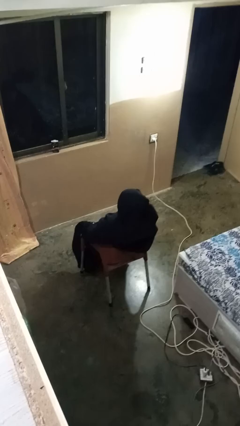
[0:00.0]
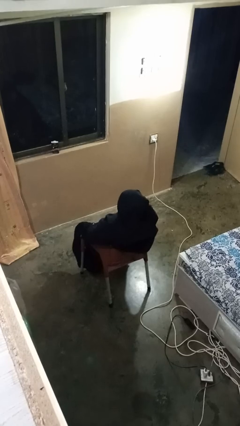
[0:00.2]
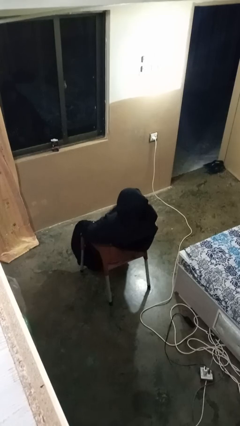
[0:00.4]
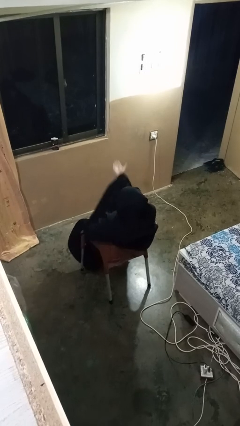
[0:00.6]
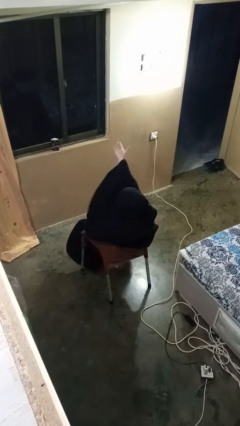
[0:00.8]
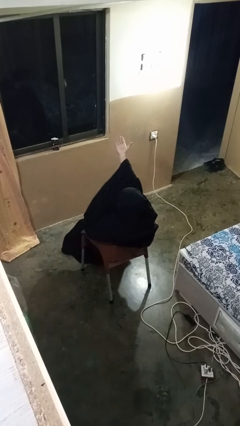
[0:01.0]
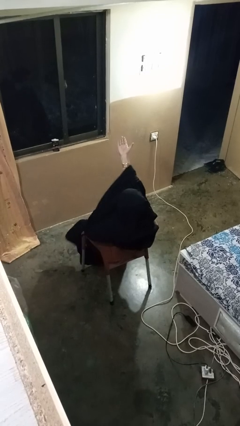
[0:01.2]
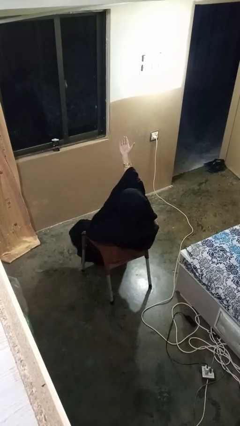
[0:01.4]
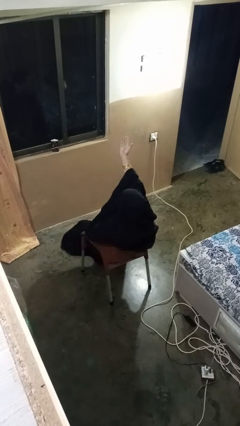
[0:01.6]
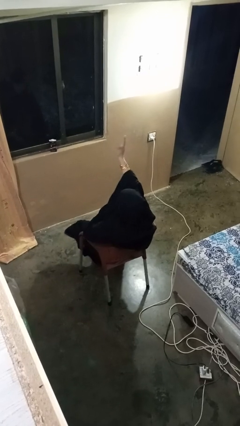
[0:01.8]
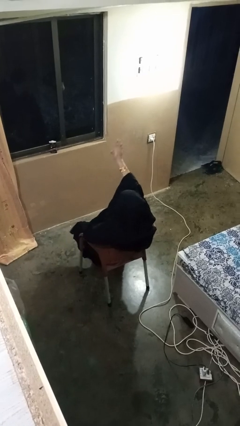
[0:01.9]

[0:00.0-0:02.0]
person gestures swipe up

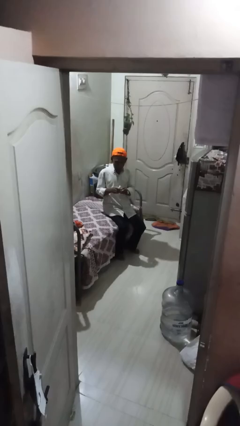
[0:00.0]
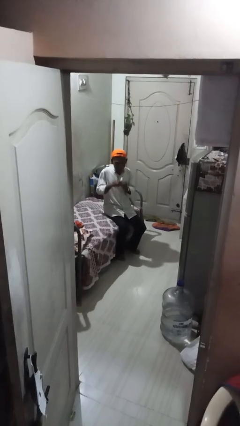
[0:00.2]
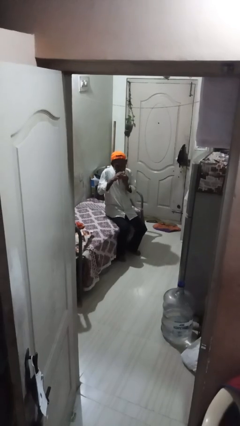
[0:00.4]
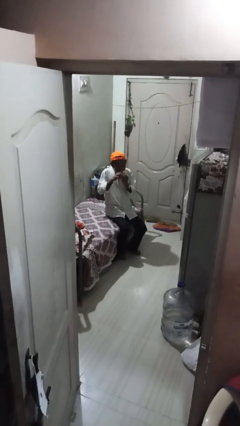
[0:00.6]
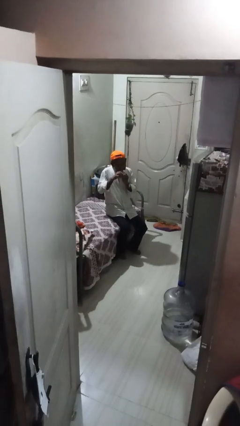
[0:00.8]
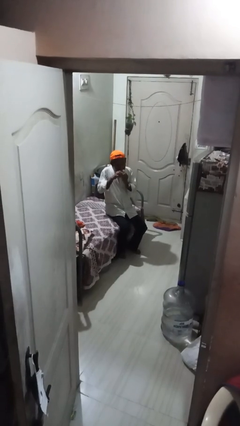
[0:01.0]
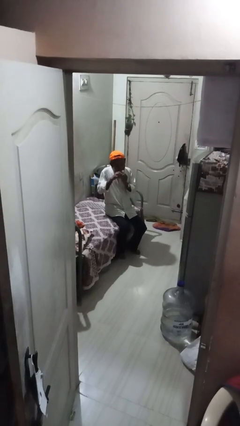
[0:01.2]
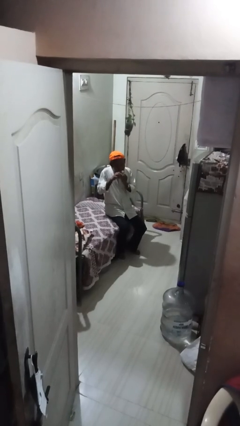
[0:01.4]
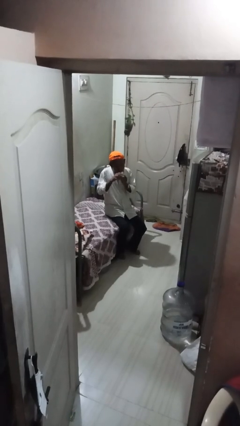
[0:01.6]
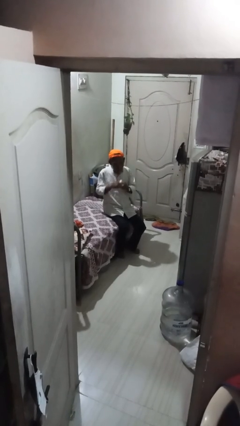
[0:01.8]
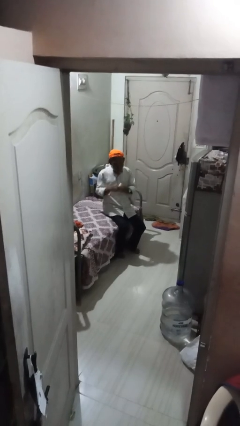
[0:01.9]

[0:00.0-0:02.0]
person eats banana

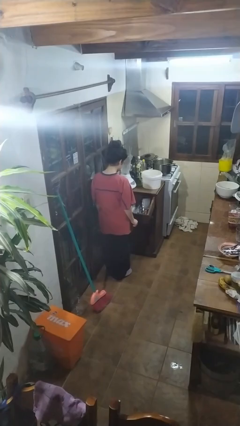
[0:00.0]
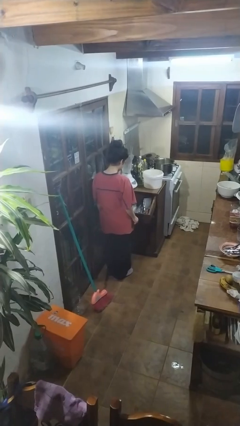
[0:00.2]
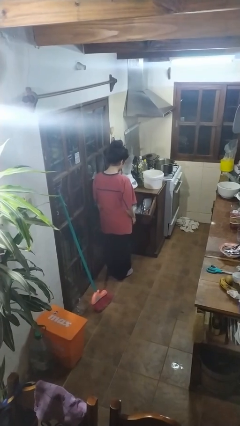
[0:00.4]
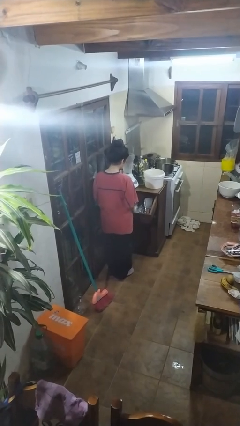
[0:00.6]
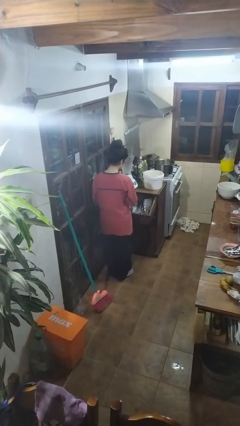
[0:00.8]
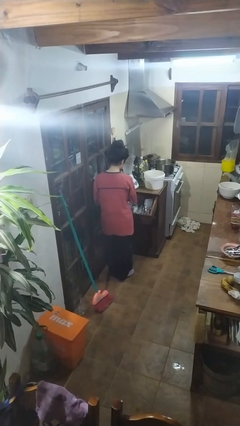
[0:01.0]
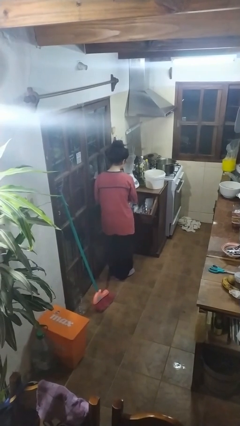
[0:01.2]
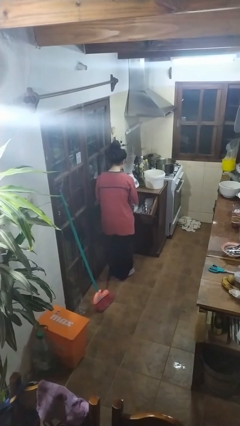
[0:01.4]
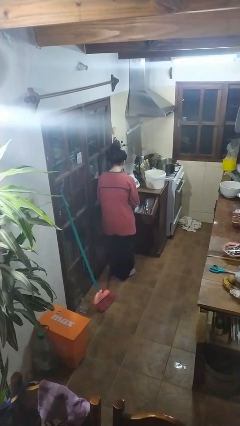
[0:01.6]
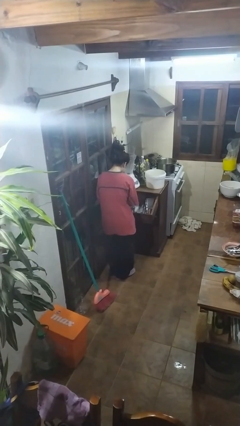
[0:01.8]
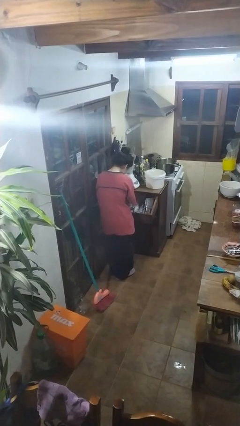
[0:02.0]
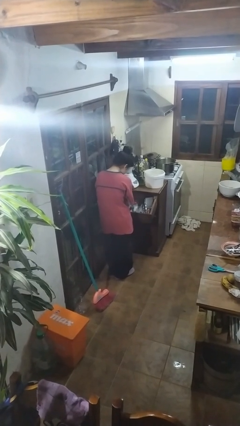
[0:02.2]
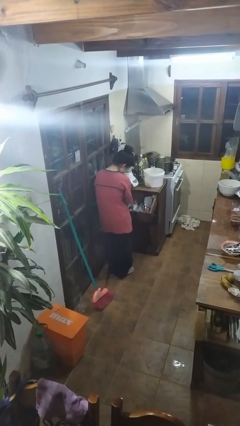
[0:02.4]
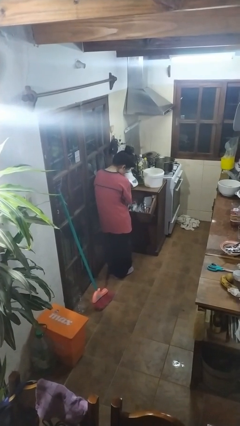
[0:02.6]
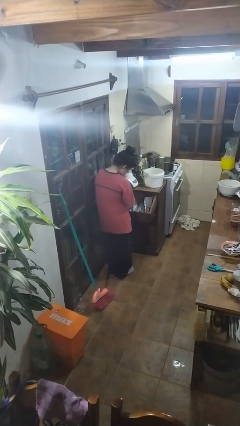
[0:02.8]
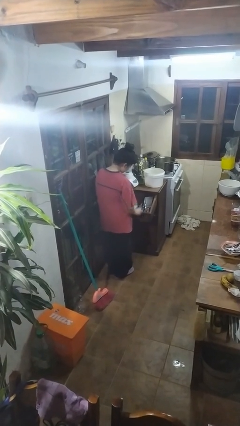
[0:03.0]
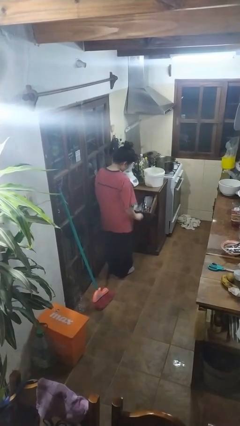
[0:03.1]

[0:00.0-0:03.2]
person searches in kitchen drawer

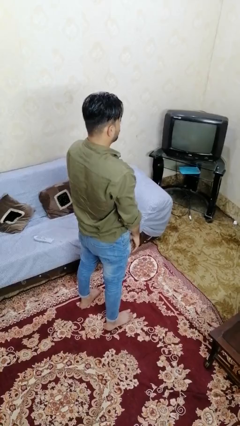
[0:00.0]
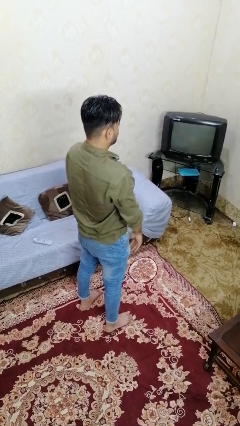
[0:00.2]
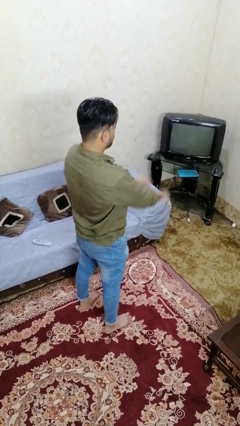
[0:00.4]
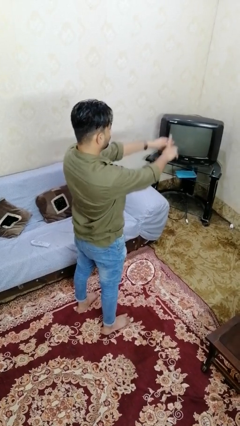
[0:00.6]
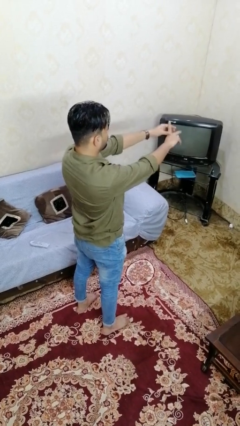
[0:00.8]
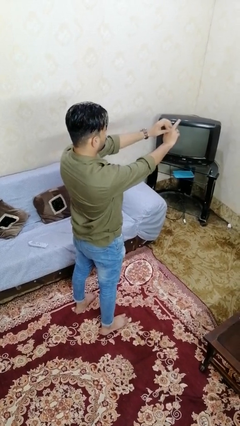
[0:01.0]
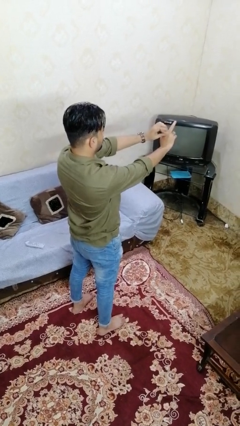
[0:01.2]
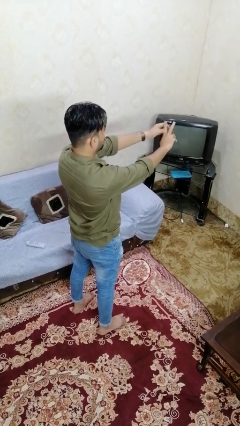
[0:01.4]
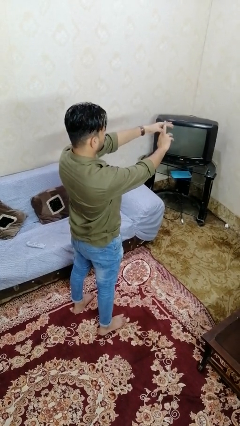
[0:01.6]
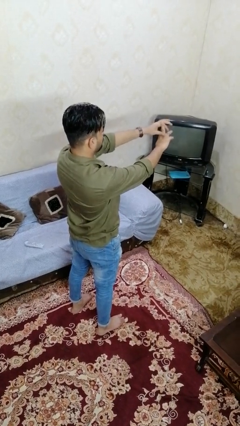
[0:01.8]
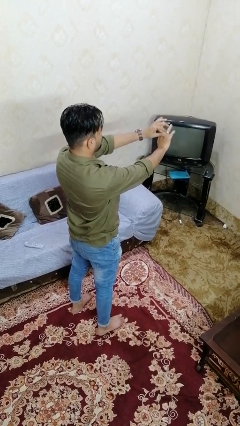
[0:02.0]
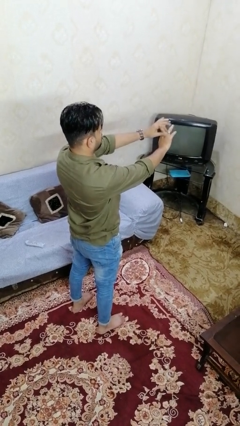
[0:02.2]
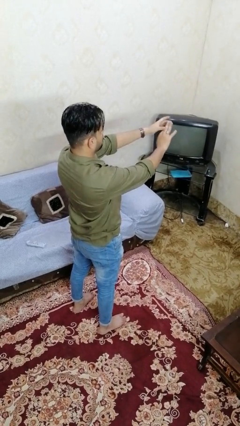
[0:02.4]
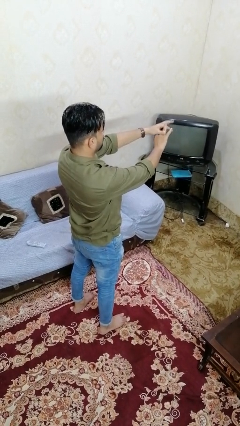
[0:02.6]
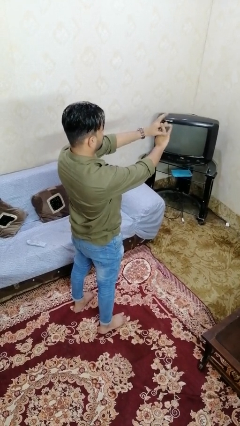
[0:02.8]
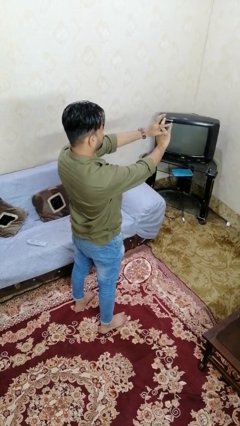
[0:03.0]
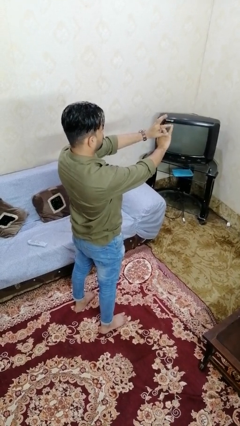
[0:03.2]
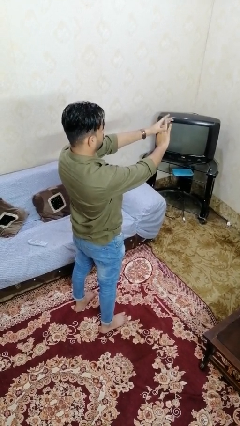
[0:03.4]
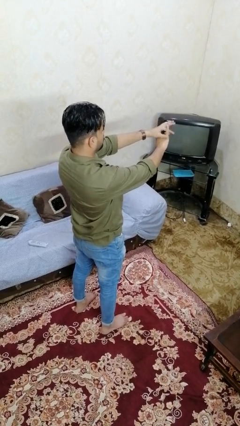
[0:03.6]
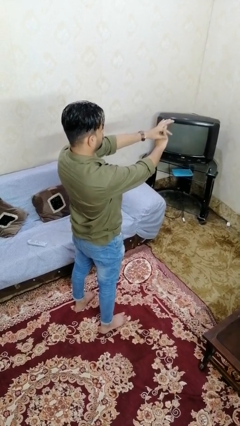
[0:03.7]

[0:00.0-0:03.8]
person cracks knuckles

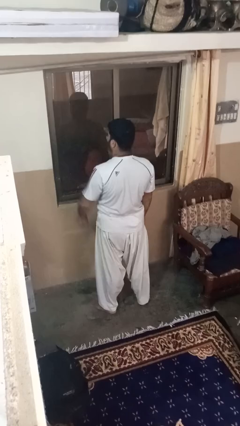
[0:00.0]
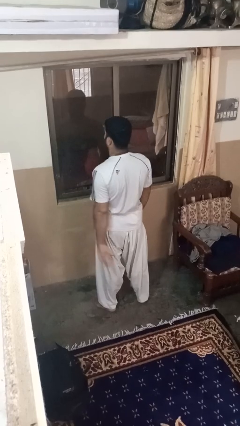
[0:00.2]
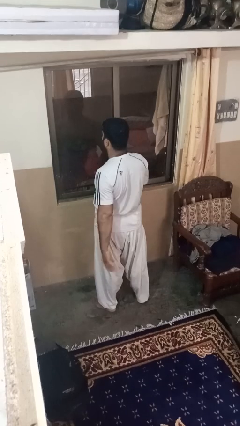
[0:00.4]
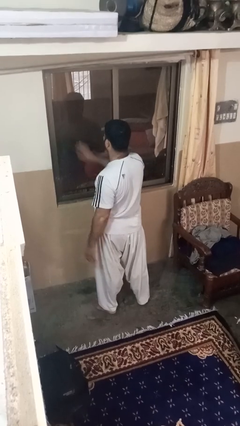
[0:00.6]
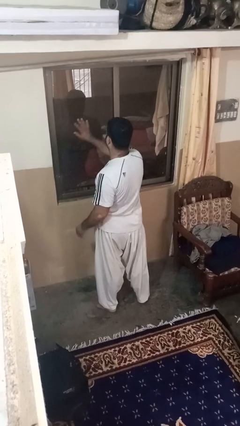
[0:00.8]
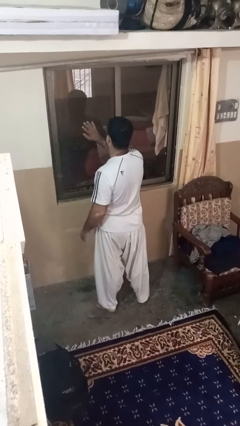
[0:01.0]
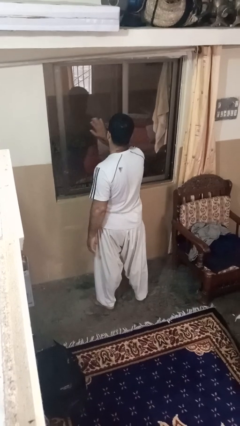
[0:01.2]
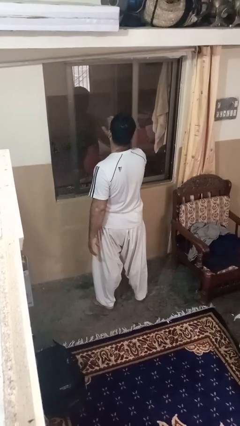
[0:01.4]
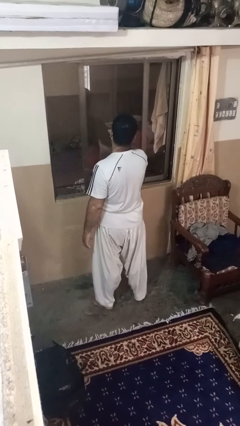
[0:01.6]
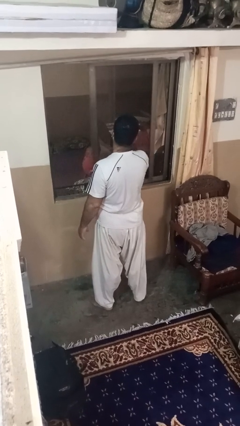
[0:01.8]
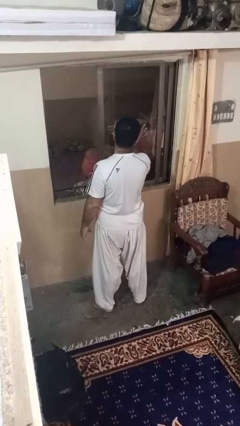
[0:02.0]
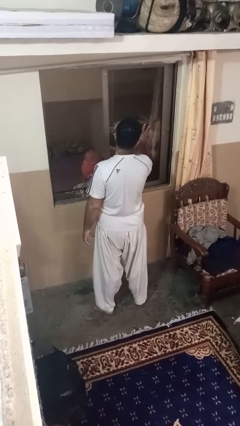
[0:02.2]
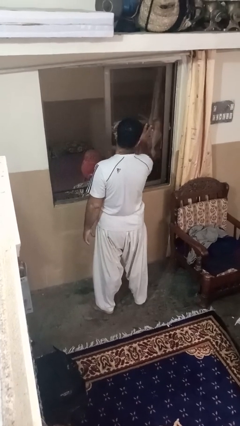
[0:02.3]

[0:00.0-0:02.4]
person opens home window

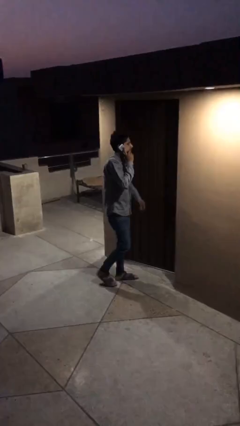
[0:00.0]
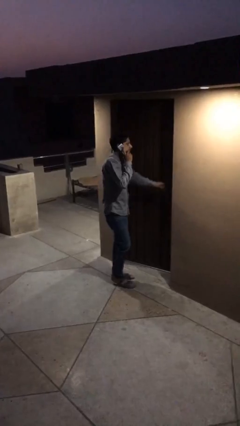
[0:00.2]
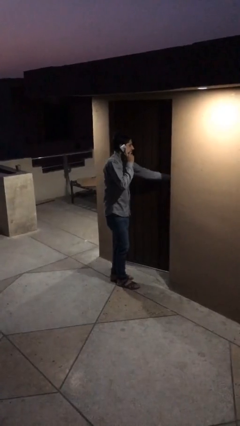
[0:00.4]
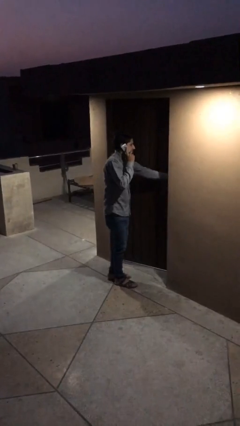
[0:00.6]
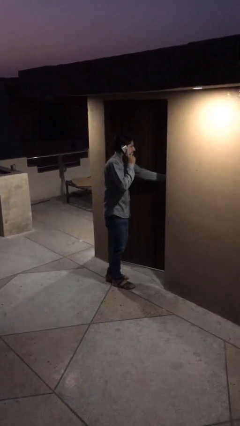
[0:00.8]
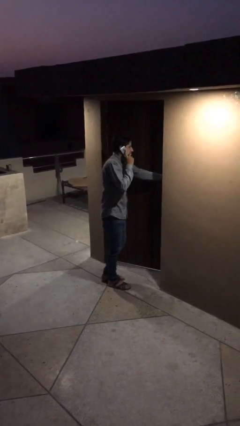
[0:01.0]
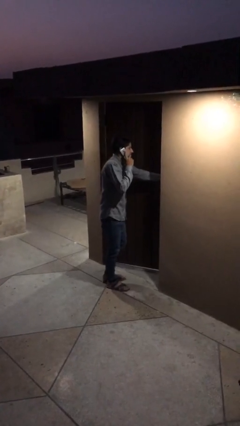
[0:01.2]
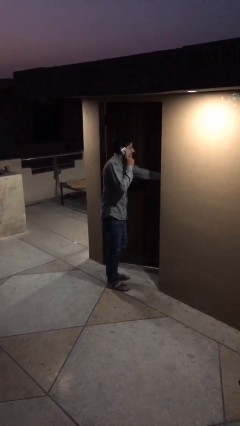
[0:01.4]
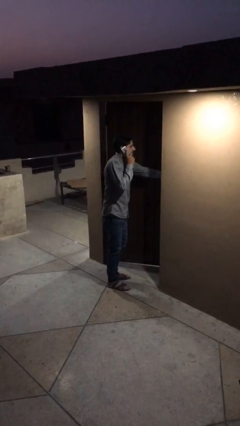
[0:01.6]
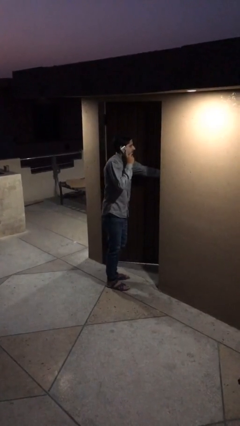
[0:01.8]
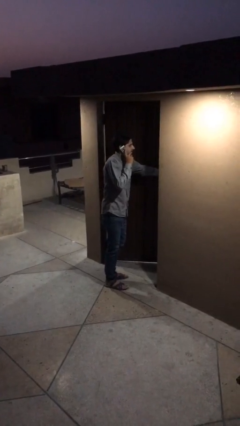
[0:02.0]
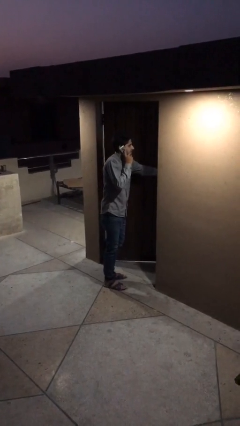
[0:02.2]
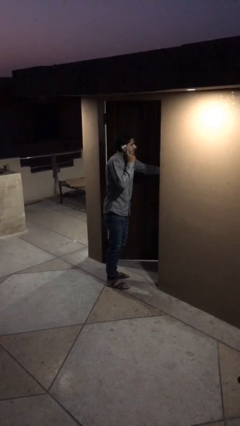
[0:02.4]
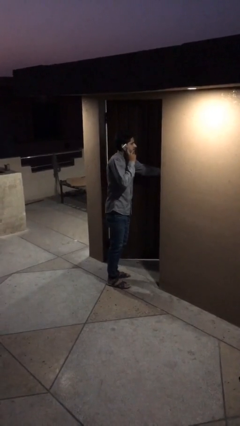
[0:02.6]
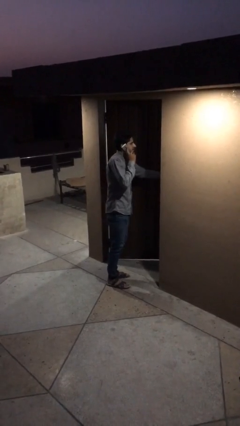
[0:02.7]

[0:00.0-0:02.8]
person opens facility door

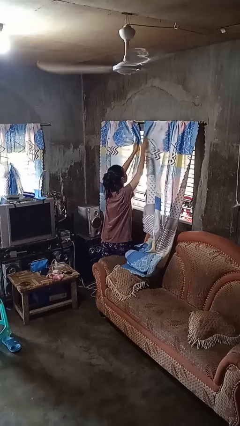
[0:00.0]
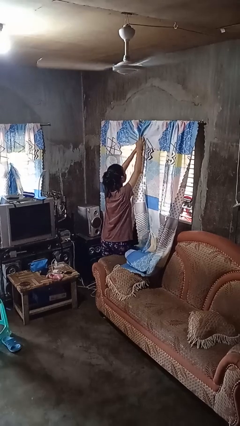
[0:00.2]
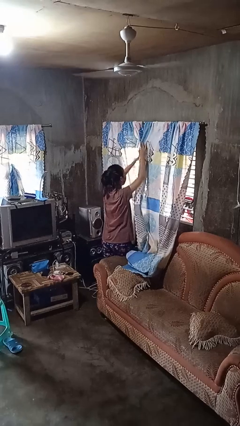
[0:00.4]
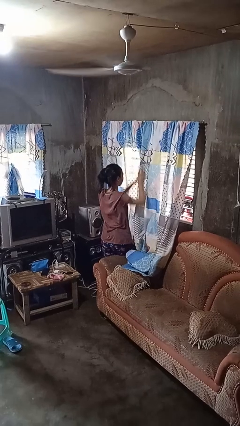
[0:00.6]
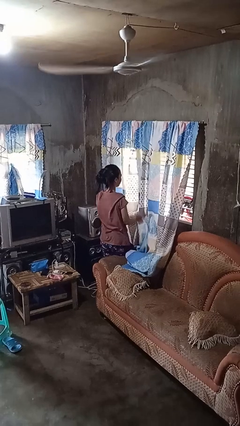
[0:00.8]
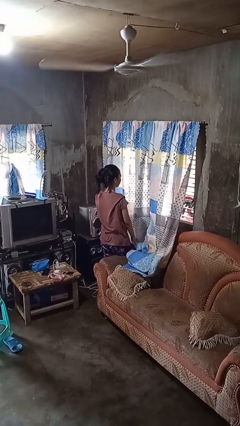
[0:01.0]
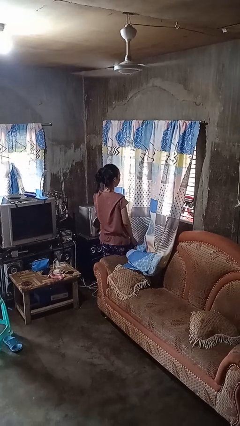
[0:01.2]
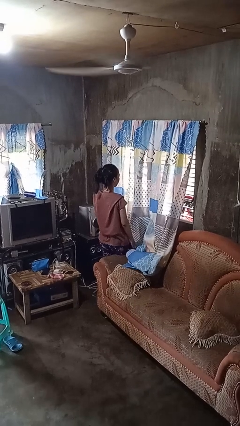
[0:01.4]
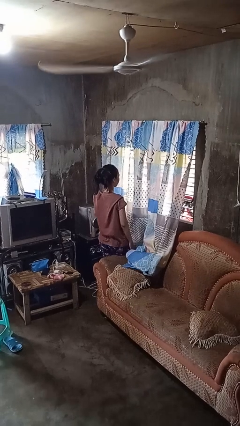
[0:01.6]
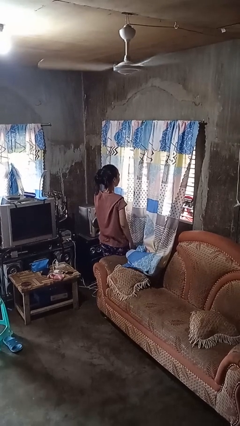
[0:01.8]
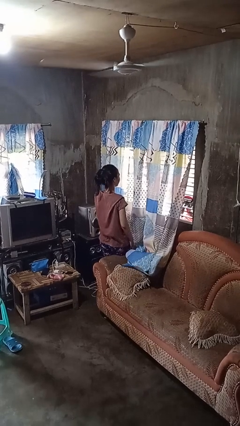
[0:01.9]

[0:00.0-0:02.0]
person closes curtains
